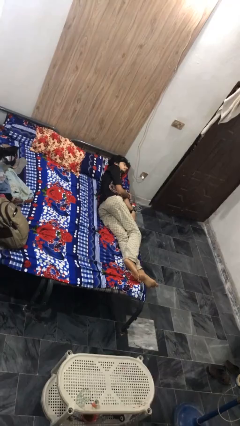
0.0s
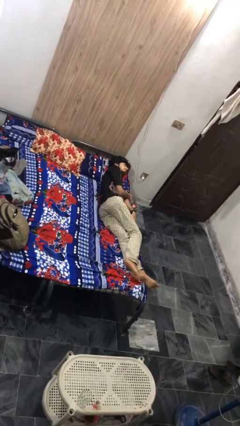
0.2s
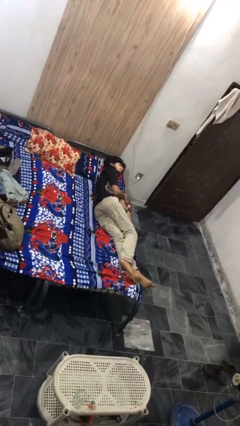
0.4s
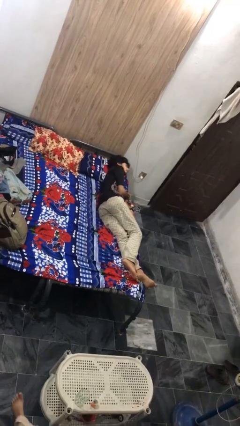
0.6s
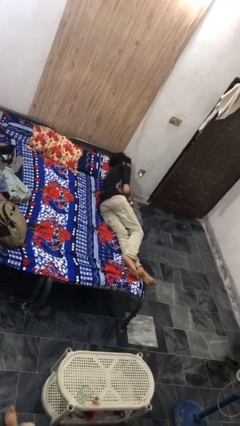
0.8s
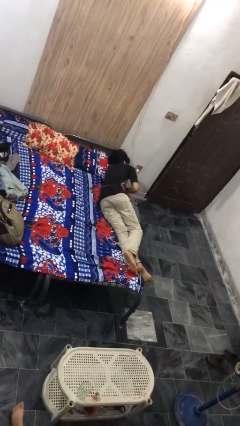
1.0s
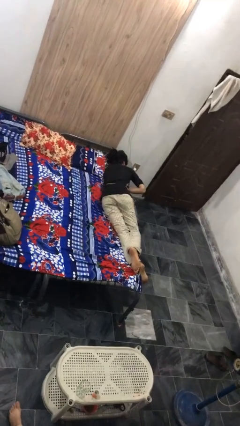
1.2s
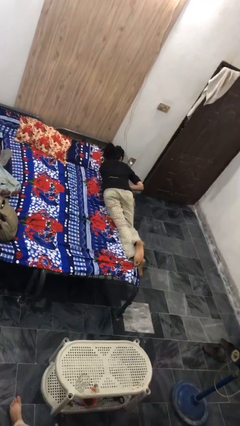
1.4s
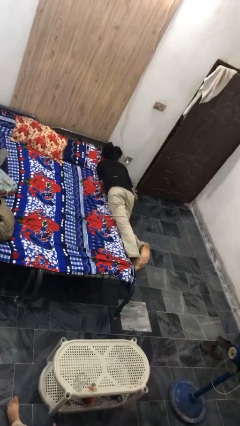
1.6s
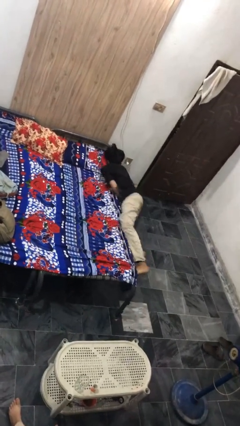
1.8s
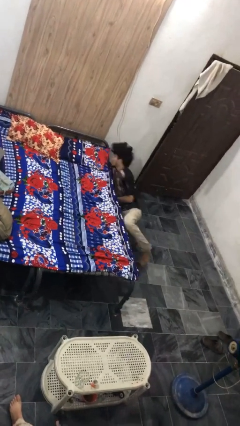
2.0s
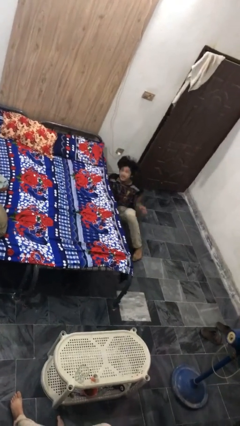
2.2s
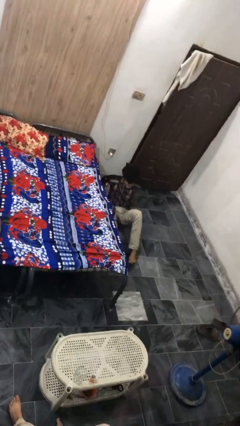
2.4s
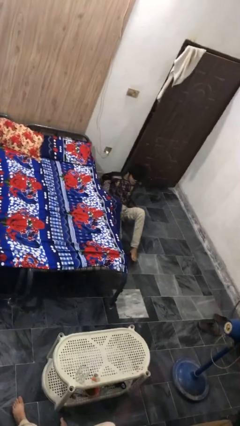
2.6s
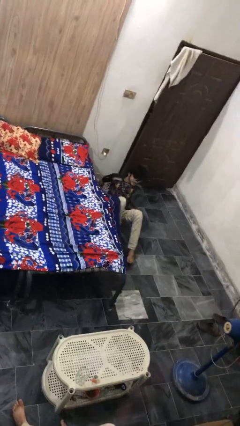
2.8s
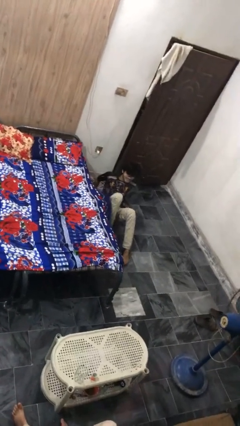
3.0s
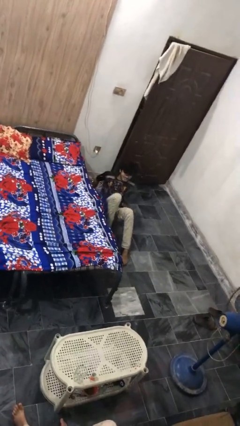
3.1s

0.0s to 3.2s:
person falls from bed

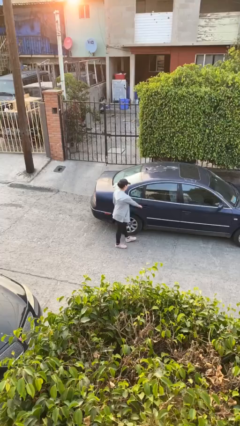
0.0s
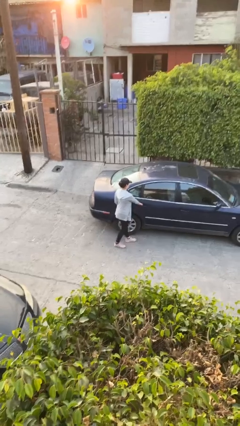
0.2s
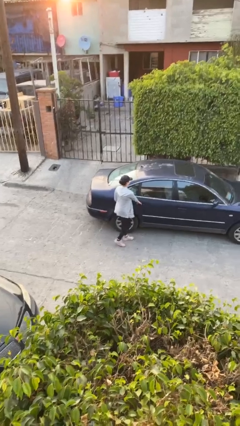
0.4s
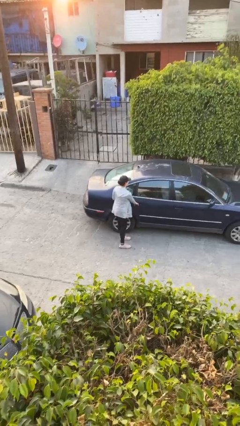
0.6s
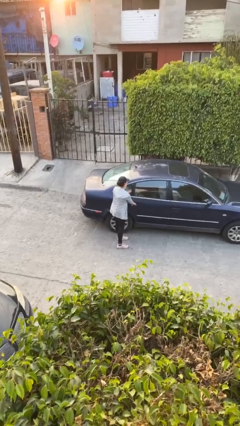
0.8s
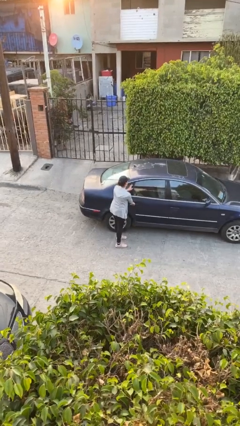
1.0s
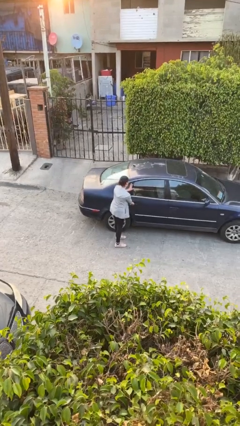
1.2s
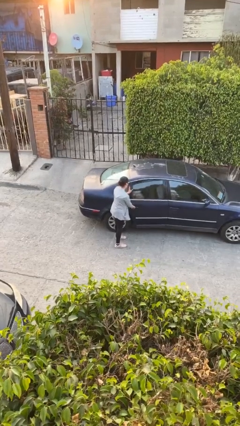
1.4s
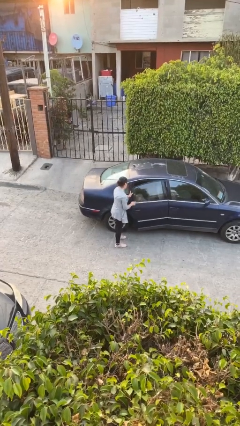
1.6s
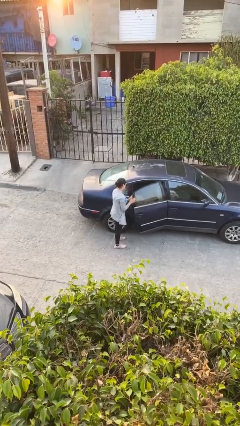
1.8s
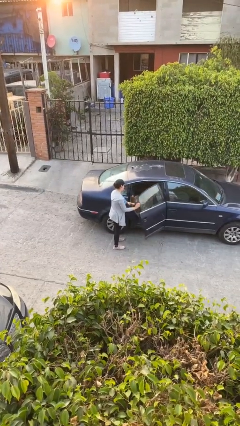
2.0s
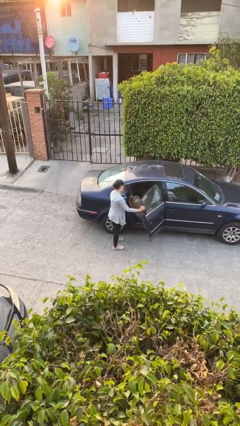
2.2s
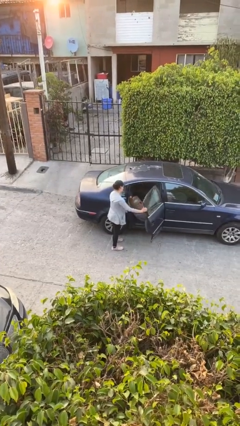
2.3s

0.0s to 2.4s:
person opens car door

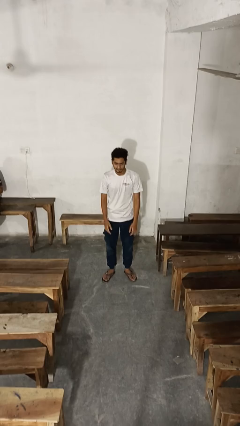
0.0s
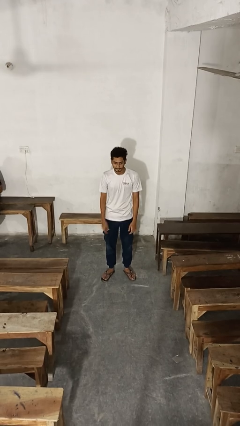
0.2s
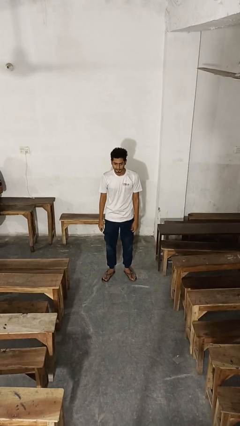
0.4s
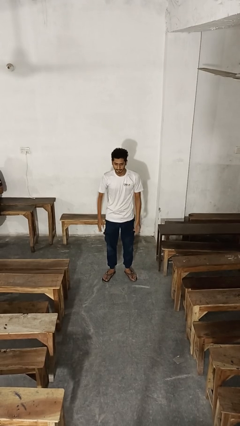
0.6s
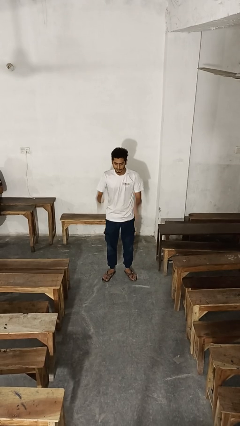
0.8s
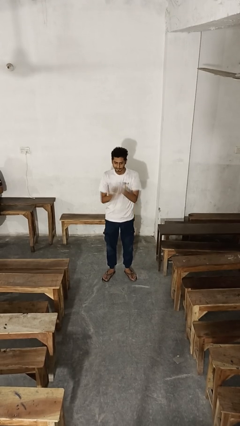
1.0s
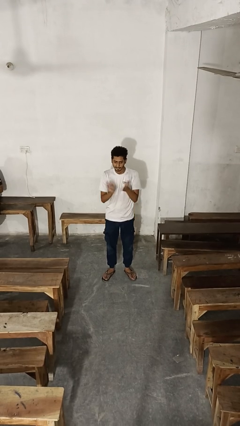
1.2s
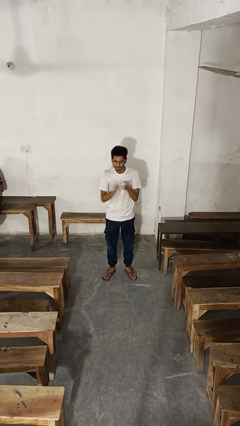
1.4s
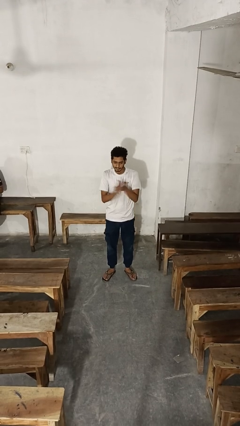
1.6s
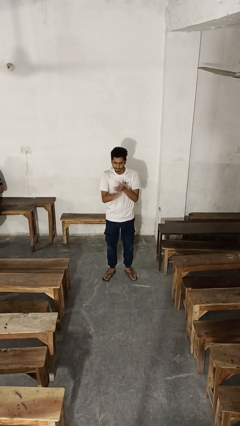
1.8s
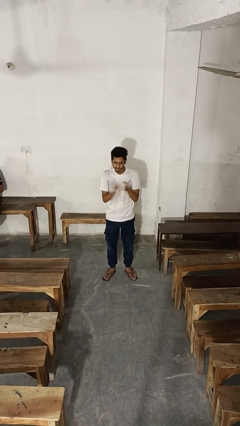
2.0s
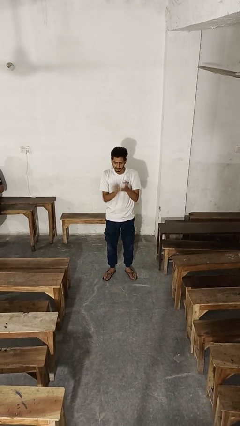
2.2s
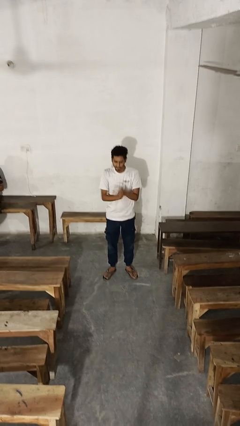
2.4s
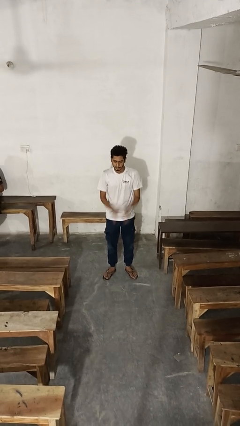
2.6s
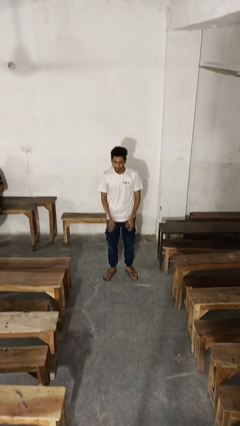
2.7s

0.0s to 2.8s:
person claps hands

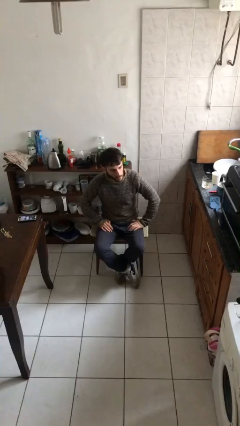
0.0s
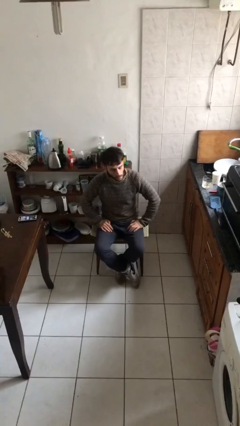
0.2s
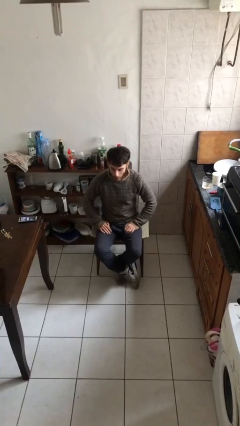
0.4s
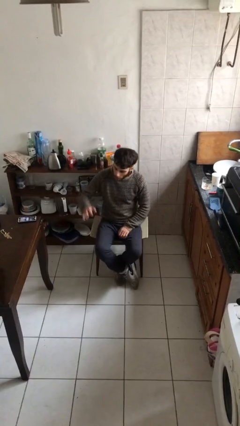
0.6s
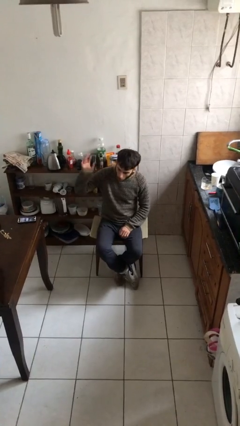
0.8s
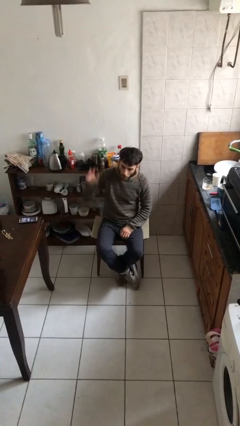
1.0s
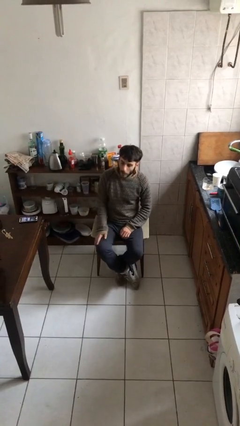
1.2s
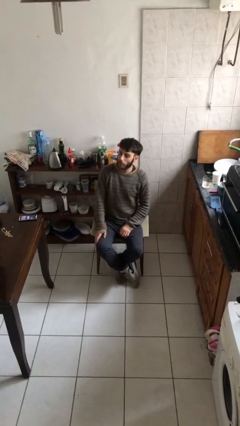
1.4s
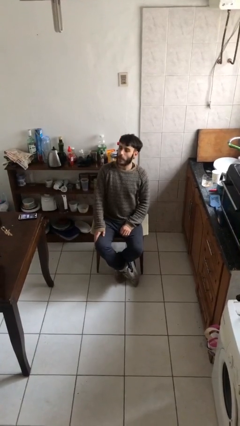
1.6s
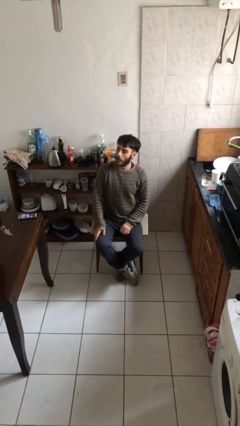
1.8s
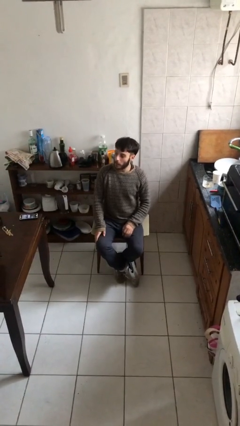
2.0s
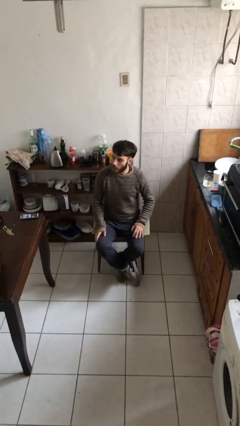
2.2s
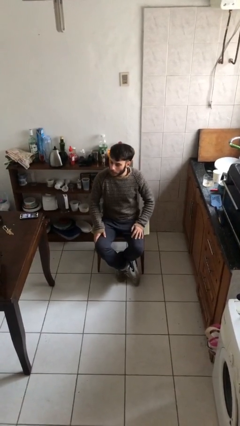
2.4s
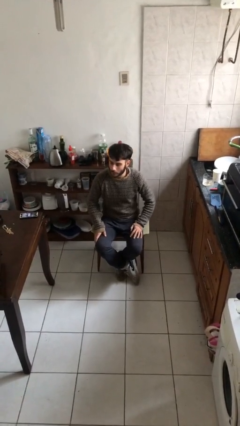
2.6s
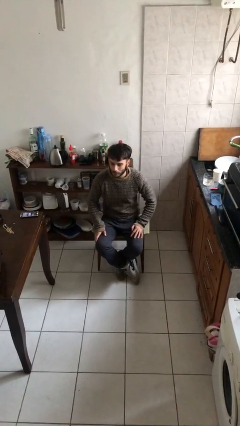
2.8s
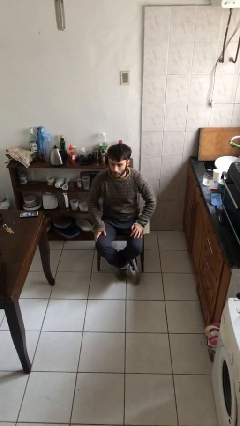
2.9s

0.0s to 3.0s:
person slaps hands on thighs

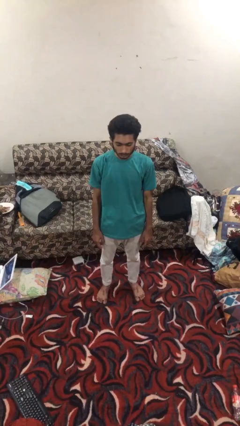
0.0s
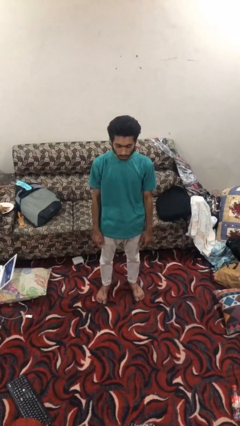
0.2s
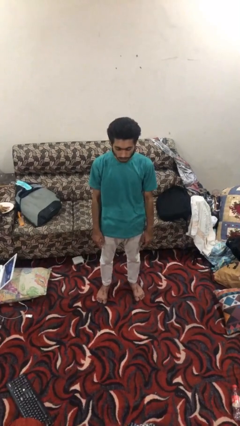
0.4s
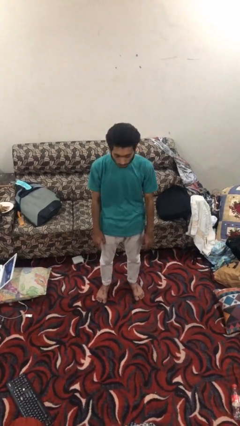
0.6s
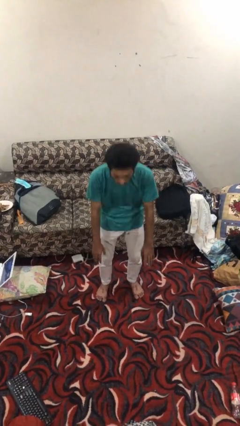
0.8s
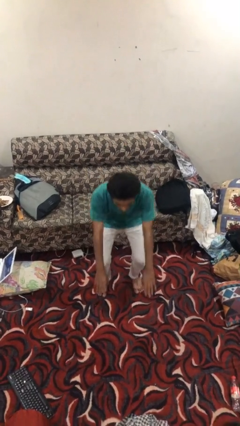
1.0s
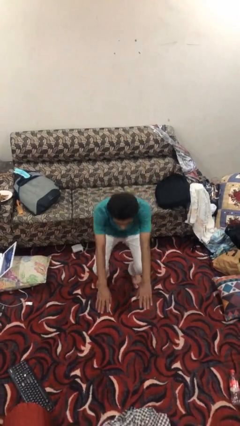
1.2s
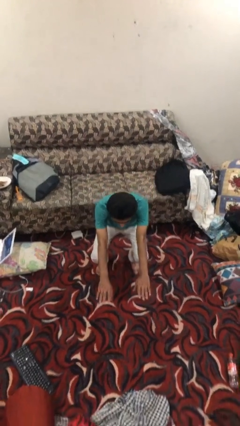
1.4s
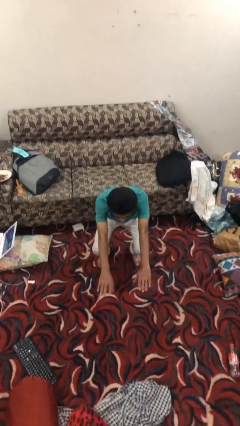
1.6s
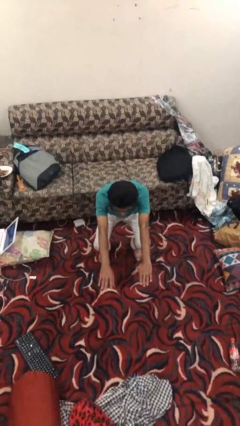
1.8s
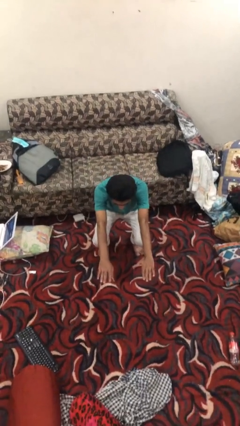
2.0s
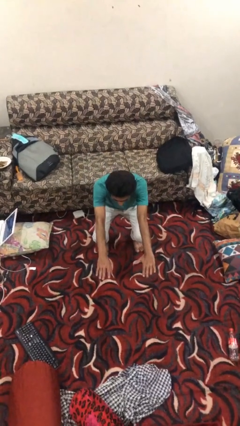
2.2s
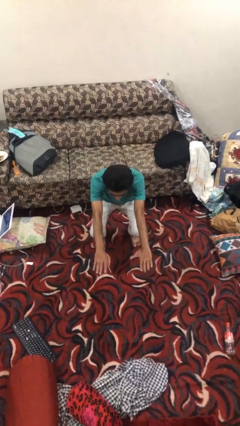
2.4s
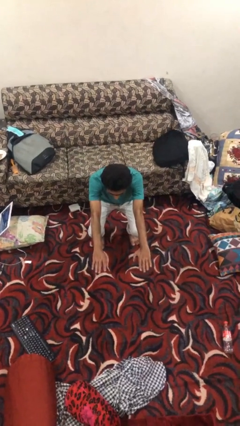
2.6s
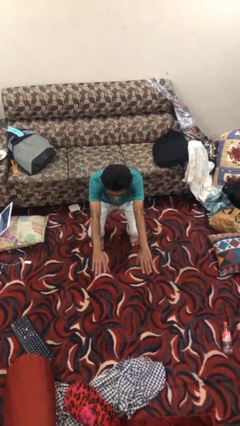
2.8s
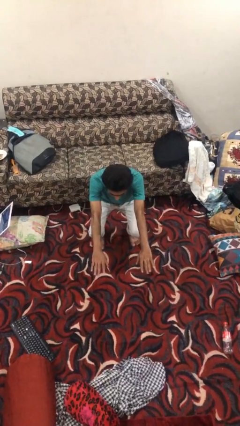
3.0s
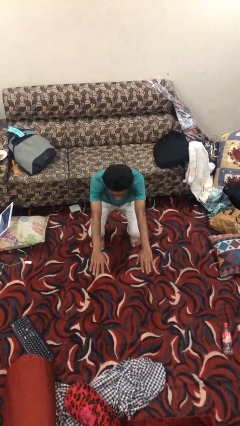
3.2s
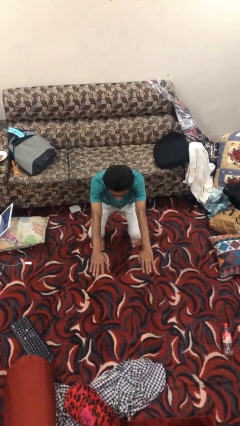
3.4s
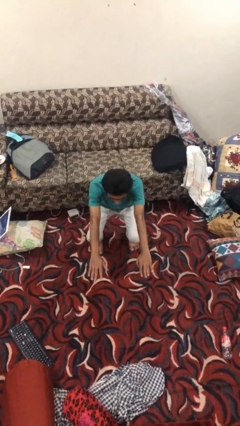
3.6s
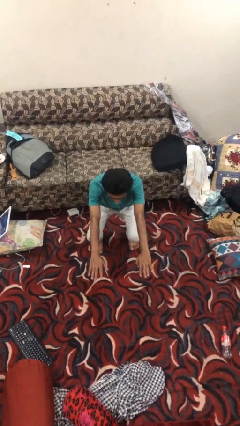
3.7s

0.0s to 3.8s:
person squats

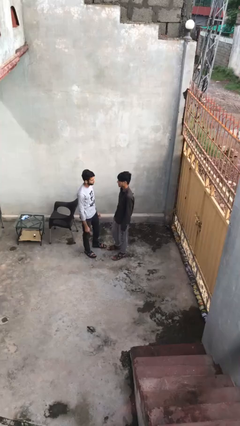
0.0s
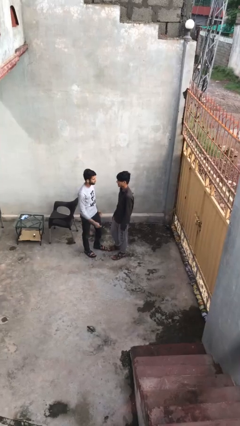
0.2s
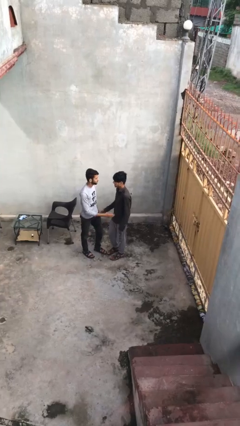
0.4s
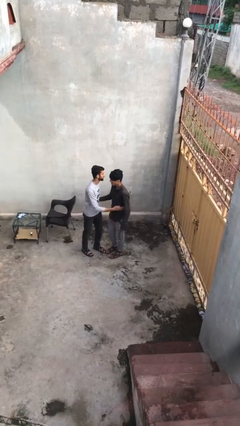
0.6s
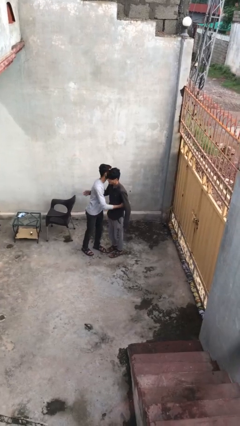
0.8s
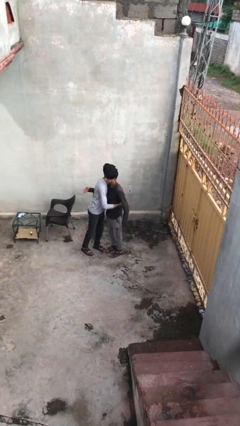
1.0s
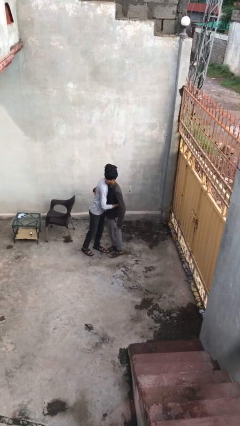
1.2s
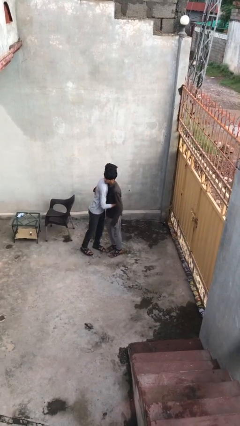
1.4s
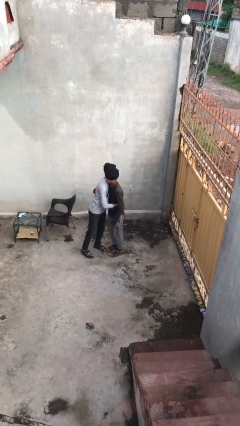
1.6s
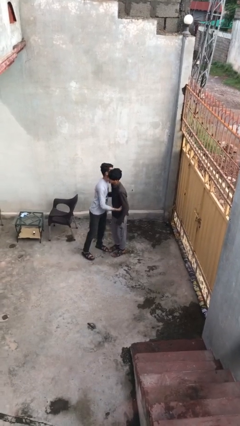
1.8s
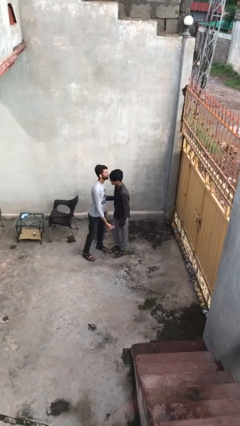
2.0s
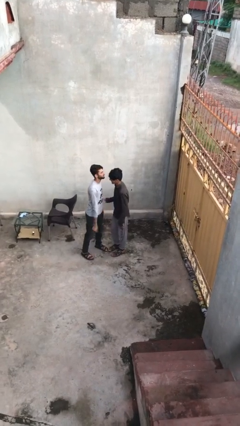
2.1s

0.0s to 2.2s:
person embraces person

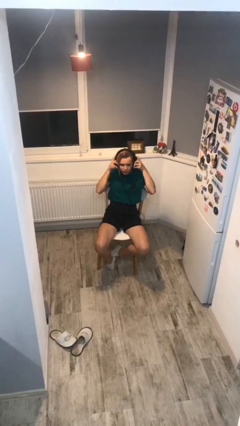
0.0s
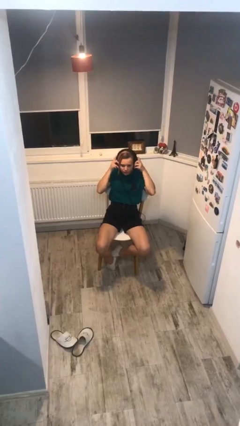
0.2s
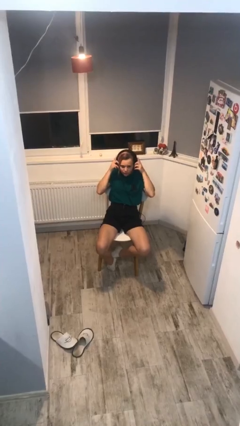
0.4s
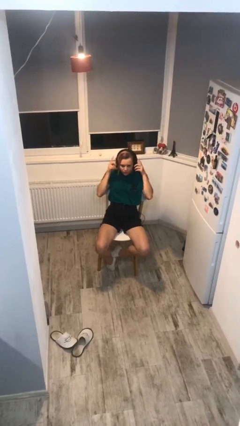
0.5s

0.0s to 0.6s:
person puts on headphones
